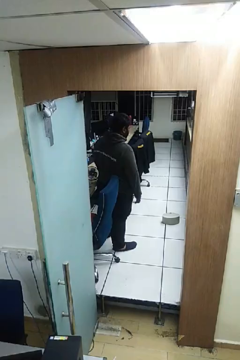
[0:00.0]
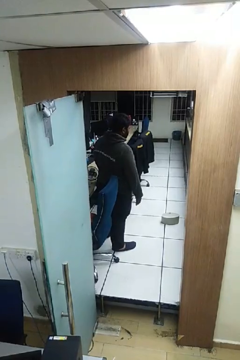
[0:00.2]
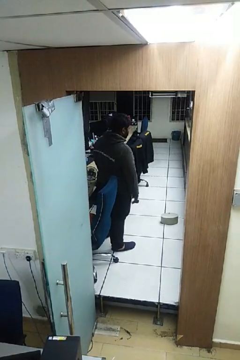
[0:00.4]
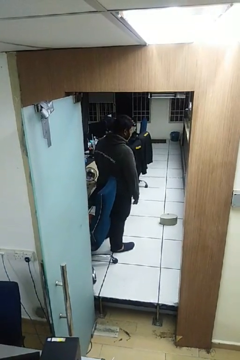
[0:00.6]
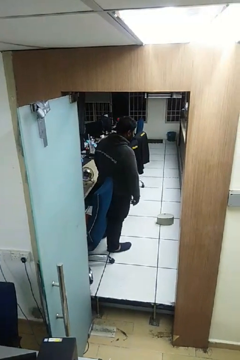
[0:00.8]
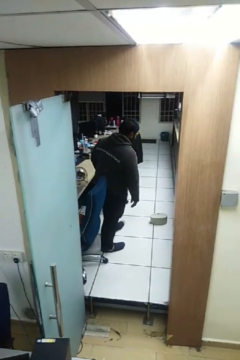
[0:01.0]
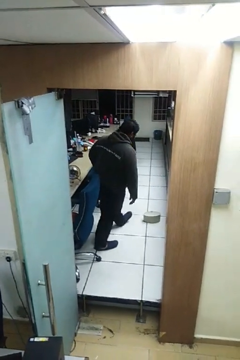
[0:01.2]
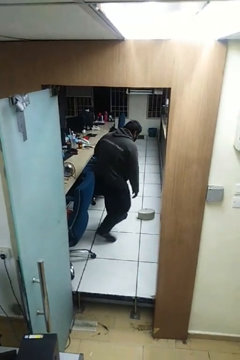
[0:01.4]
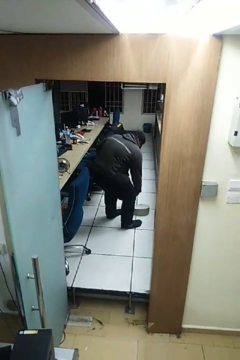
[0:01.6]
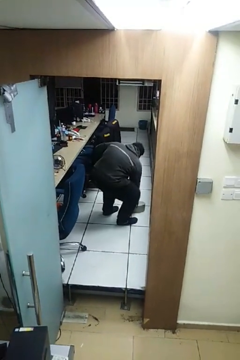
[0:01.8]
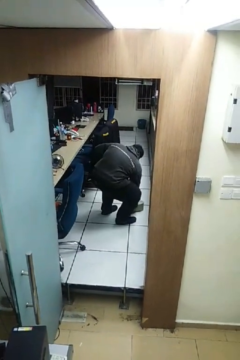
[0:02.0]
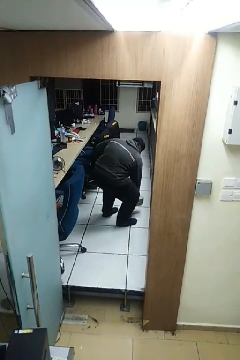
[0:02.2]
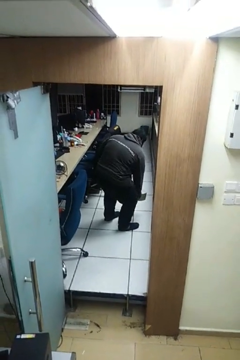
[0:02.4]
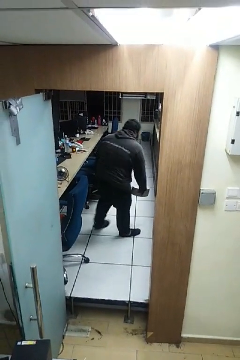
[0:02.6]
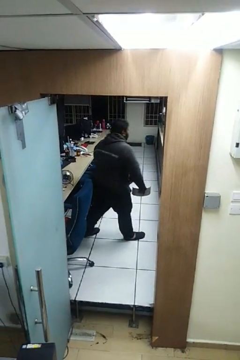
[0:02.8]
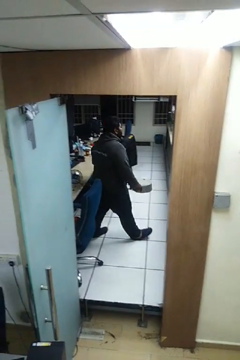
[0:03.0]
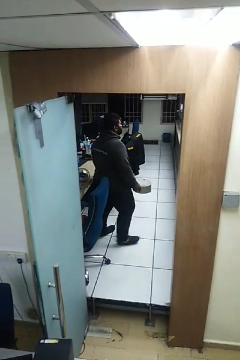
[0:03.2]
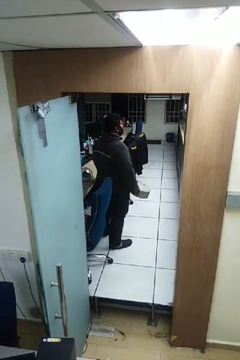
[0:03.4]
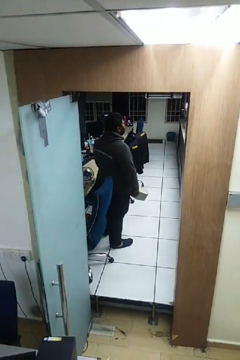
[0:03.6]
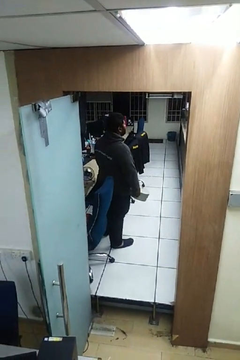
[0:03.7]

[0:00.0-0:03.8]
person picks up object from floor

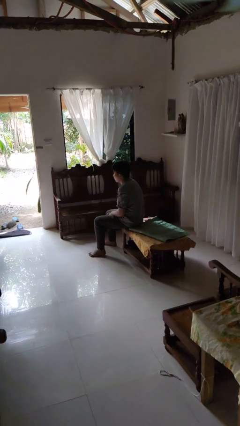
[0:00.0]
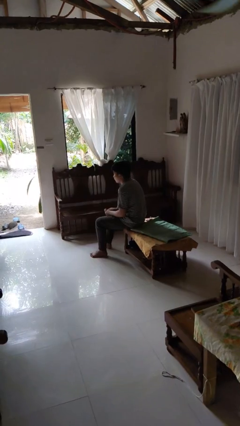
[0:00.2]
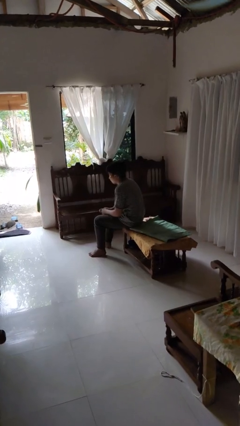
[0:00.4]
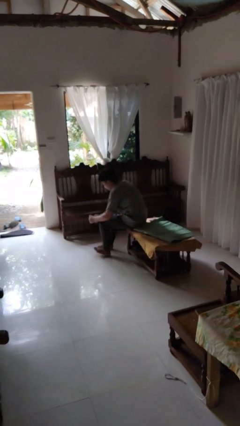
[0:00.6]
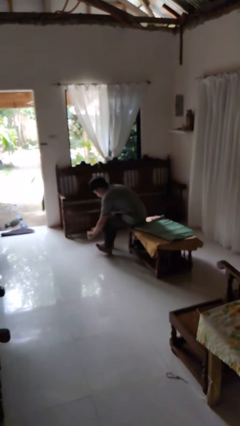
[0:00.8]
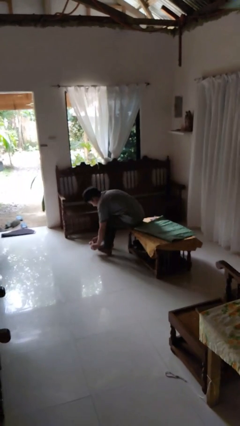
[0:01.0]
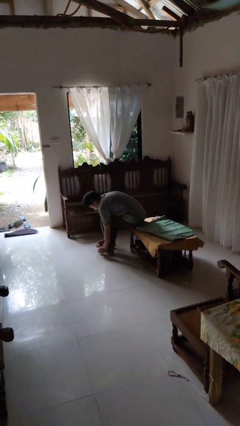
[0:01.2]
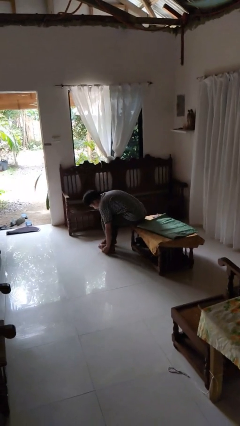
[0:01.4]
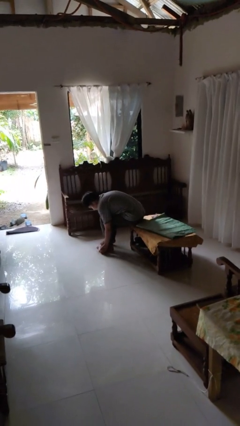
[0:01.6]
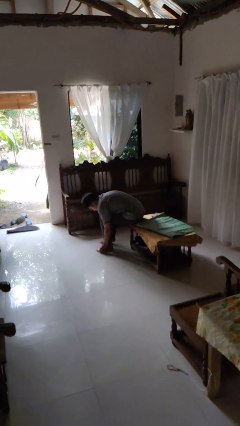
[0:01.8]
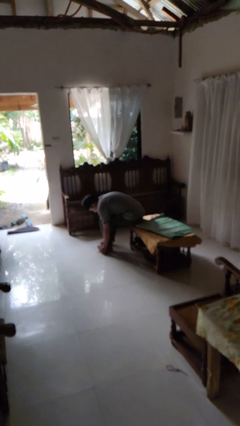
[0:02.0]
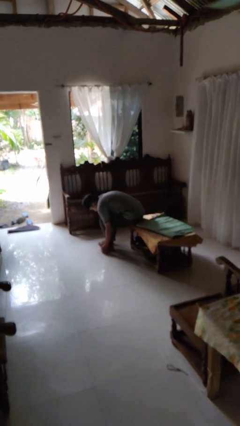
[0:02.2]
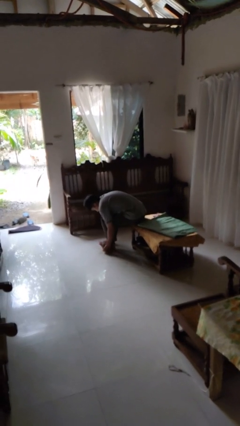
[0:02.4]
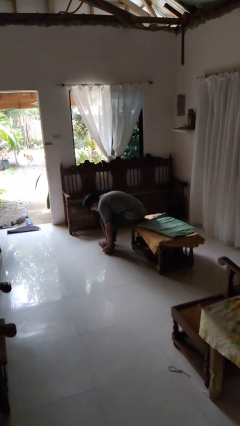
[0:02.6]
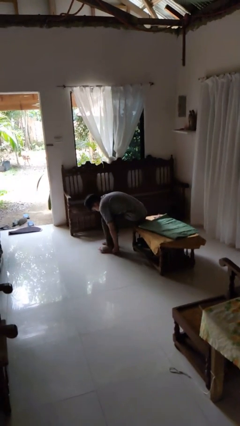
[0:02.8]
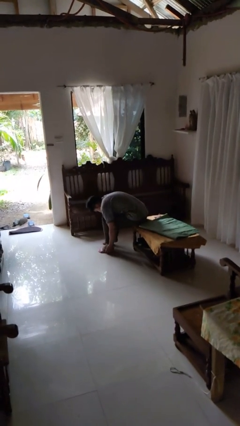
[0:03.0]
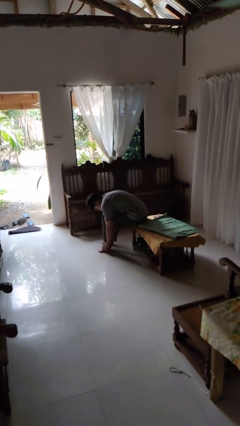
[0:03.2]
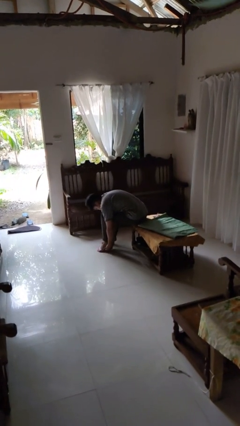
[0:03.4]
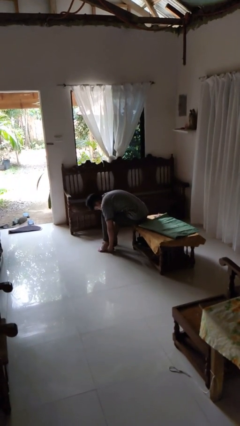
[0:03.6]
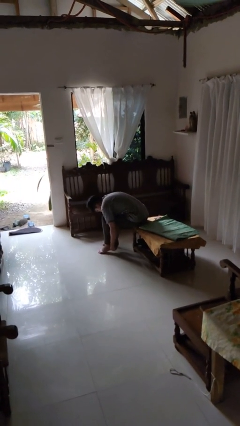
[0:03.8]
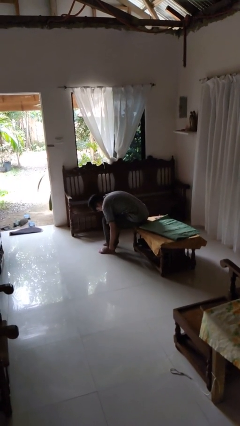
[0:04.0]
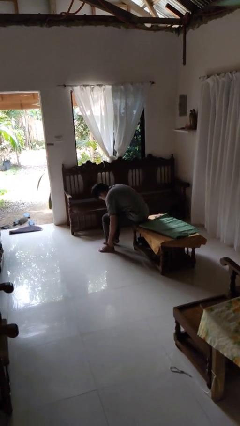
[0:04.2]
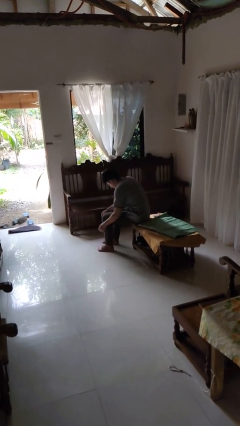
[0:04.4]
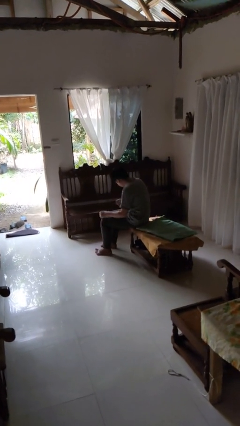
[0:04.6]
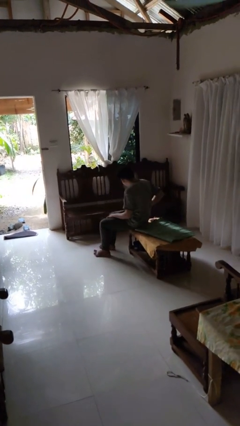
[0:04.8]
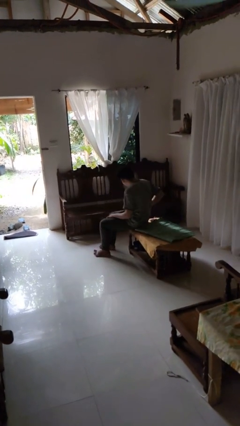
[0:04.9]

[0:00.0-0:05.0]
person puts on socks

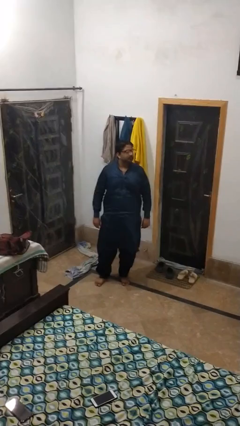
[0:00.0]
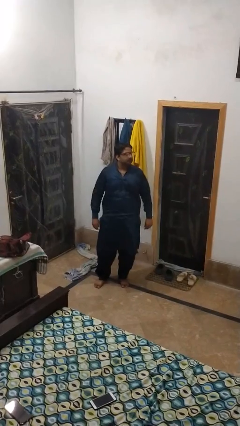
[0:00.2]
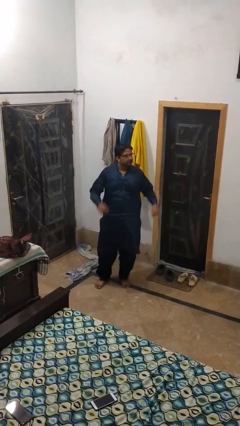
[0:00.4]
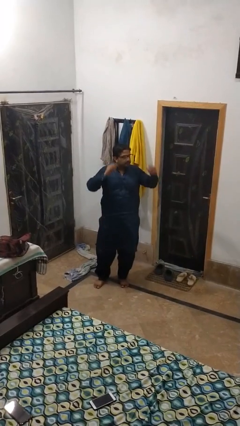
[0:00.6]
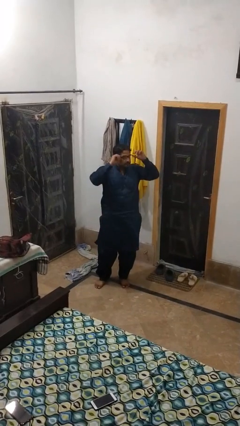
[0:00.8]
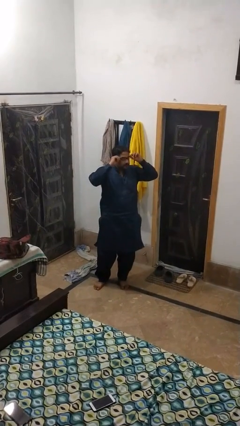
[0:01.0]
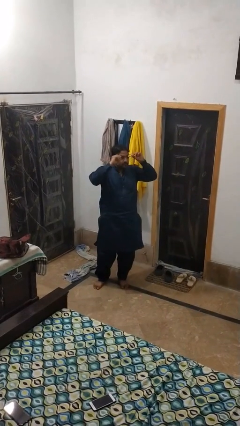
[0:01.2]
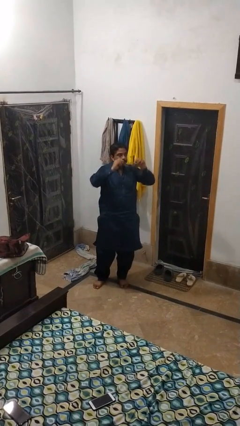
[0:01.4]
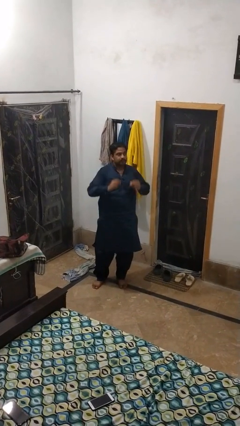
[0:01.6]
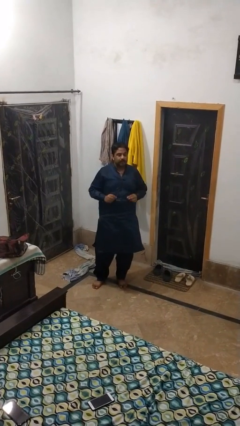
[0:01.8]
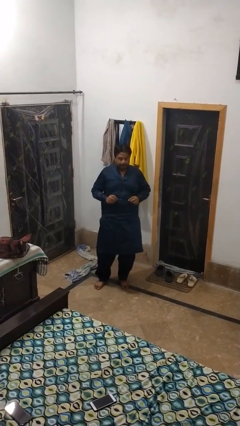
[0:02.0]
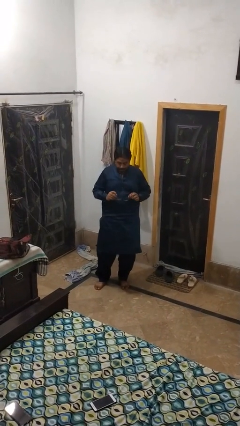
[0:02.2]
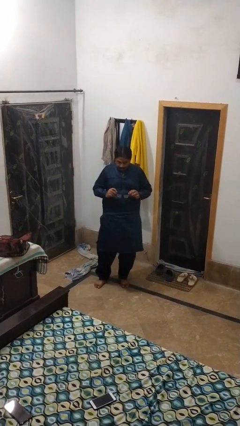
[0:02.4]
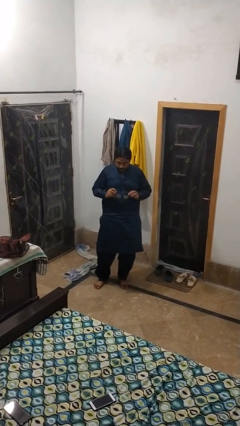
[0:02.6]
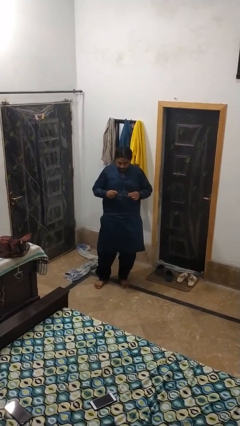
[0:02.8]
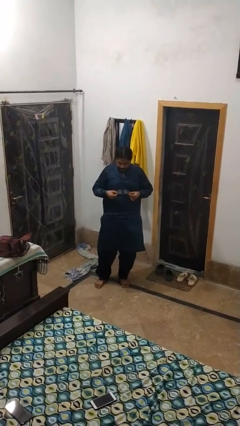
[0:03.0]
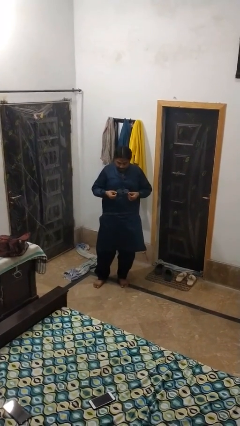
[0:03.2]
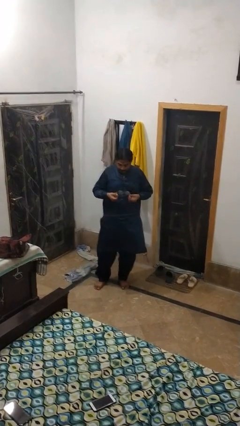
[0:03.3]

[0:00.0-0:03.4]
person takes off glasses

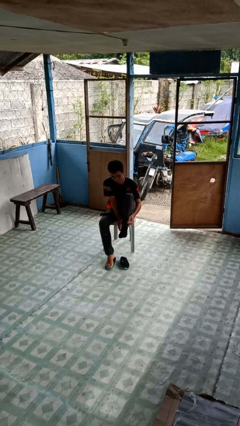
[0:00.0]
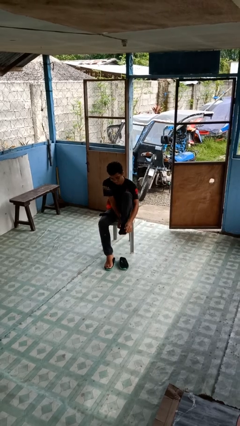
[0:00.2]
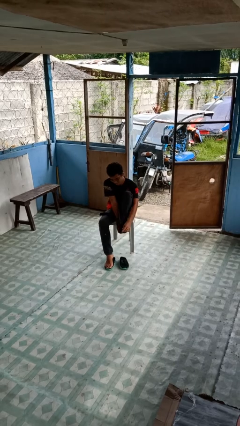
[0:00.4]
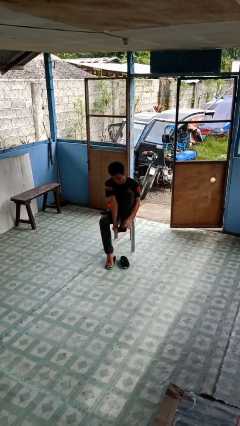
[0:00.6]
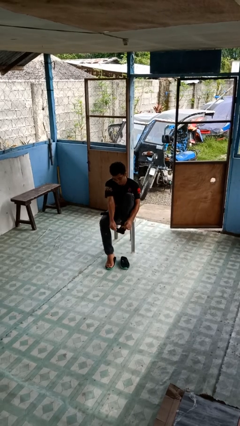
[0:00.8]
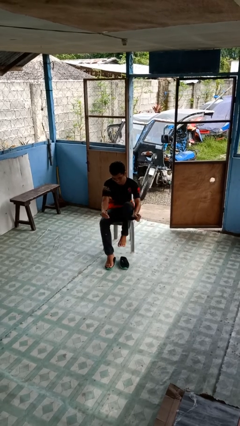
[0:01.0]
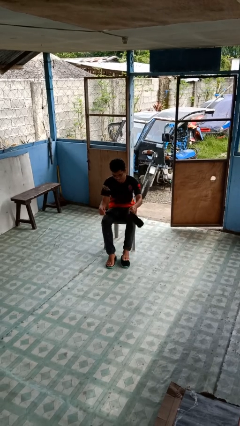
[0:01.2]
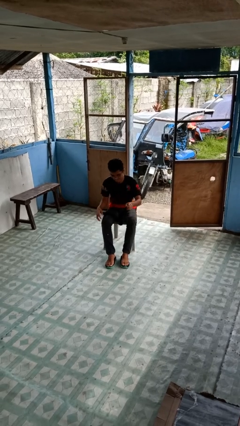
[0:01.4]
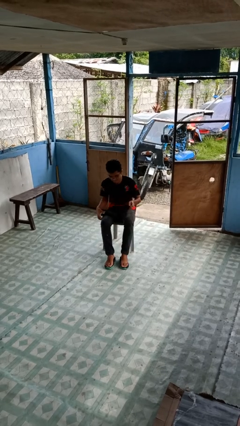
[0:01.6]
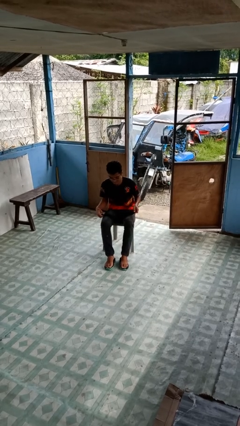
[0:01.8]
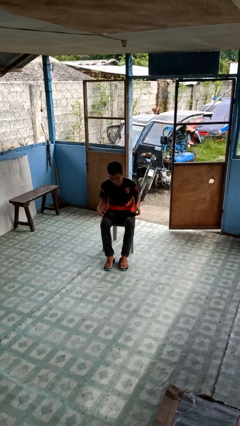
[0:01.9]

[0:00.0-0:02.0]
person takes off socks

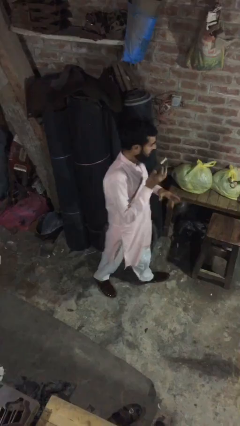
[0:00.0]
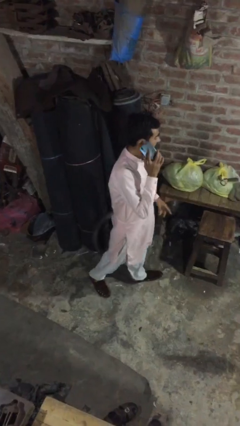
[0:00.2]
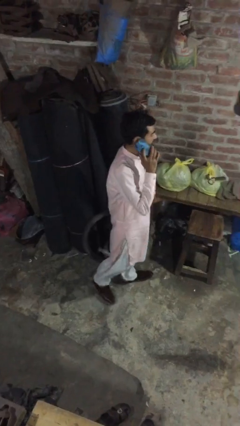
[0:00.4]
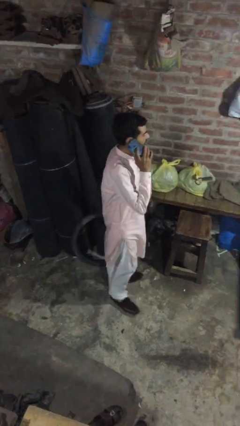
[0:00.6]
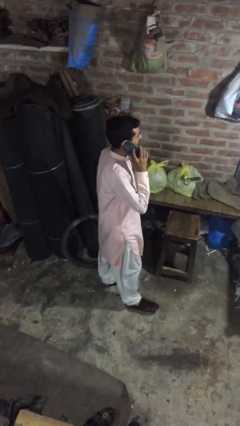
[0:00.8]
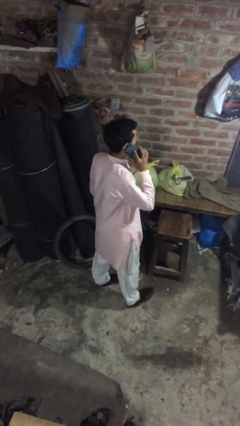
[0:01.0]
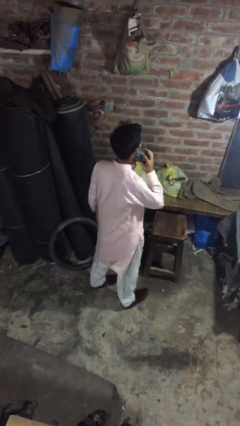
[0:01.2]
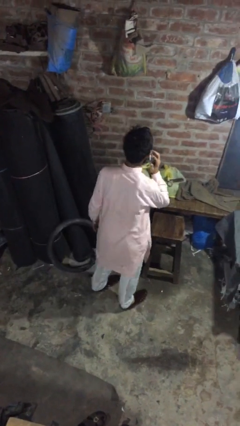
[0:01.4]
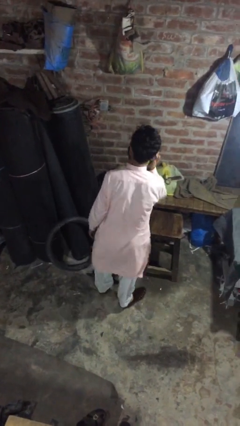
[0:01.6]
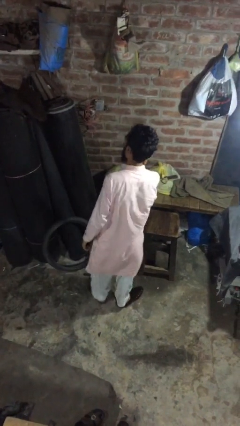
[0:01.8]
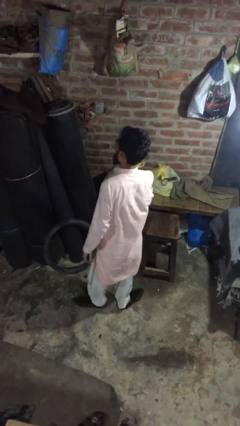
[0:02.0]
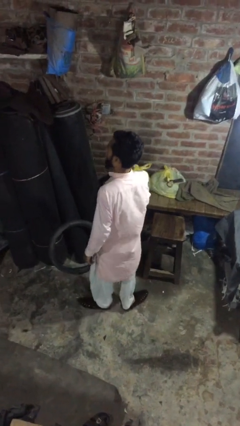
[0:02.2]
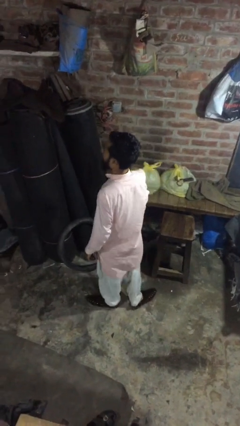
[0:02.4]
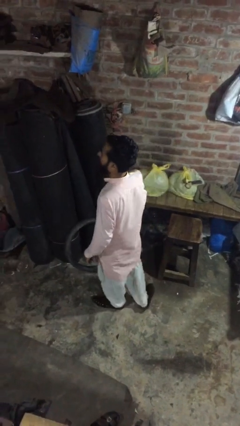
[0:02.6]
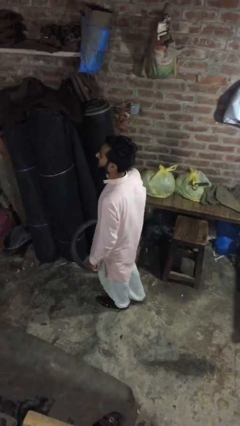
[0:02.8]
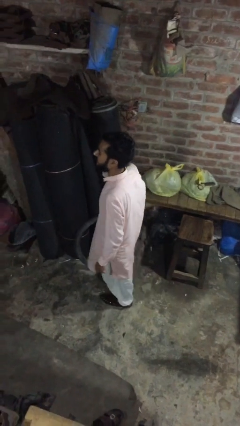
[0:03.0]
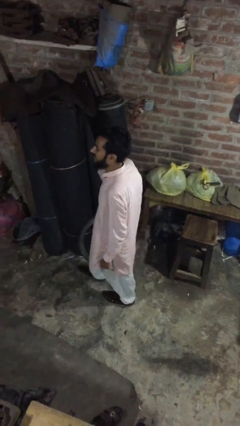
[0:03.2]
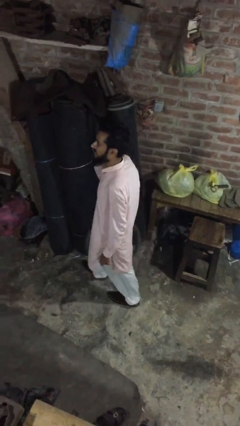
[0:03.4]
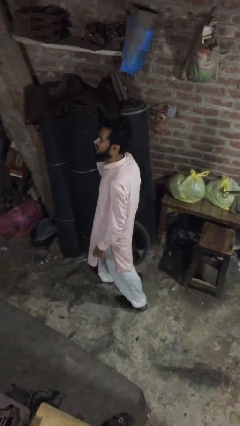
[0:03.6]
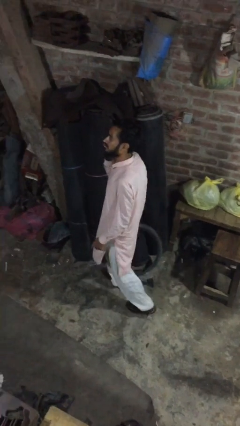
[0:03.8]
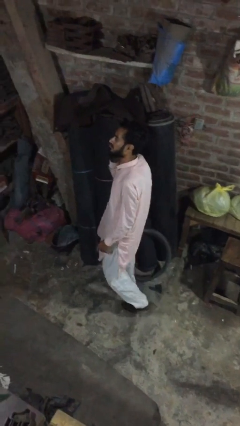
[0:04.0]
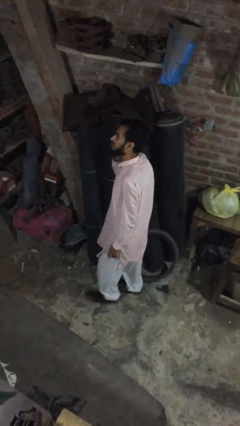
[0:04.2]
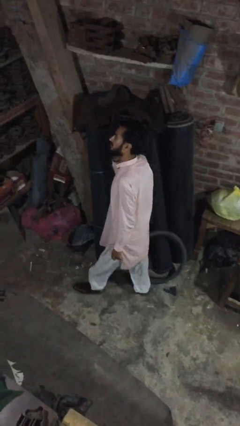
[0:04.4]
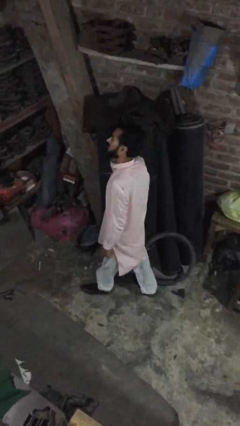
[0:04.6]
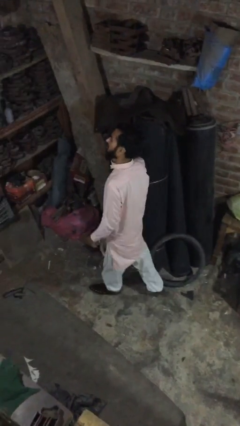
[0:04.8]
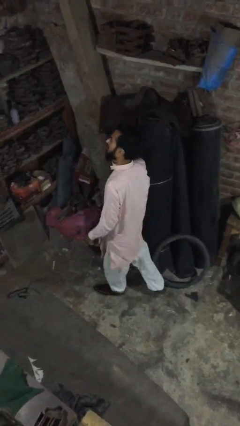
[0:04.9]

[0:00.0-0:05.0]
person talks on phone
